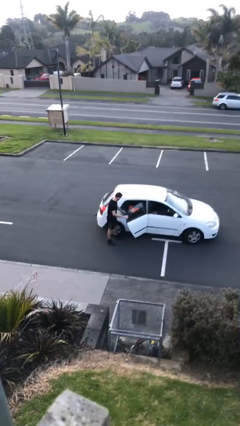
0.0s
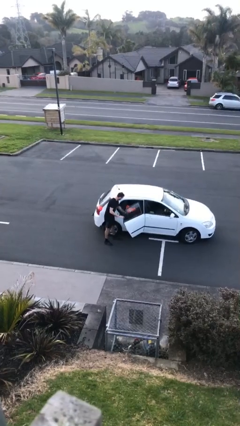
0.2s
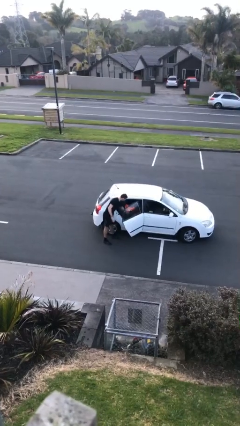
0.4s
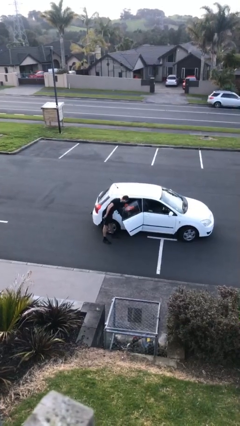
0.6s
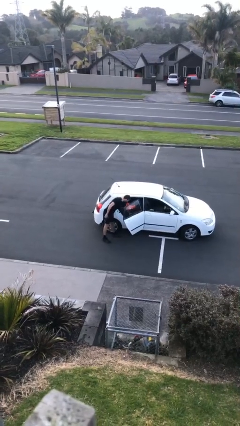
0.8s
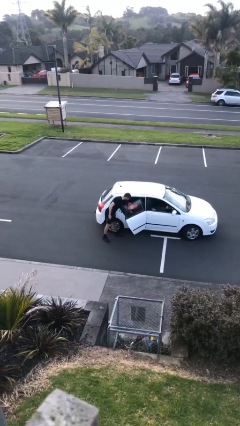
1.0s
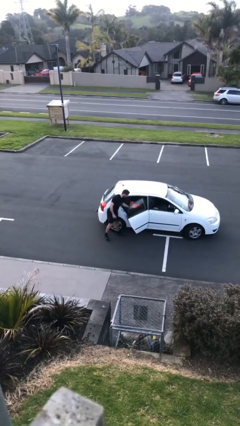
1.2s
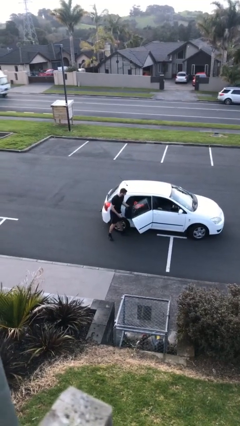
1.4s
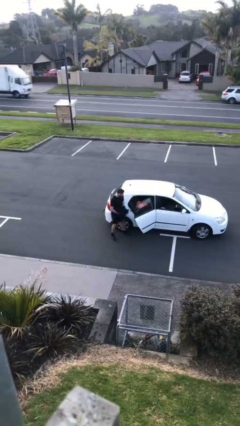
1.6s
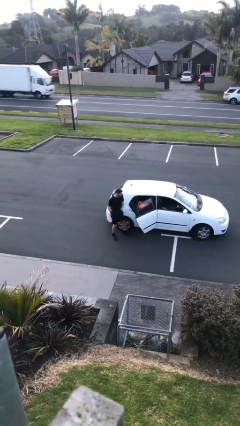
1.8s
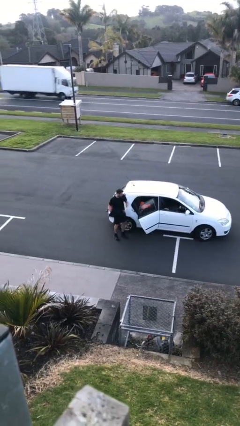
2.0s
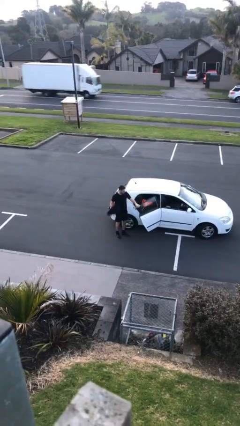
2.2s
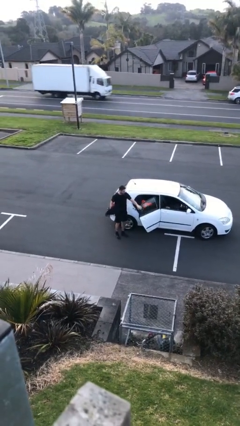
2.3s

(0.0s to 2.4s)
person unloads car

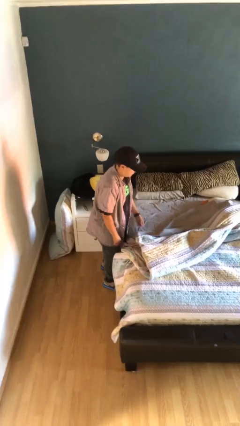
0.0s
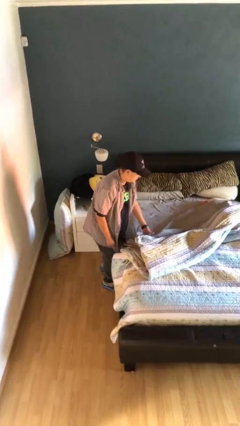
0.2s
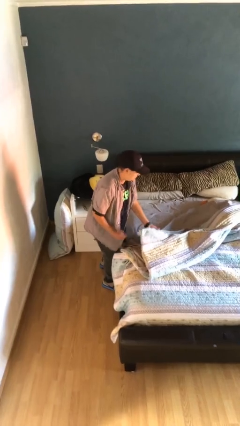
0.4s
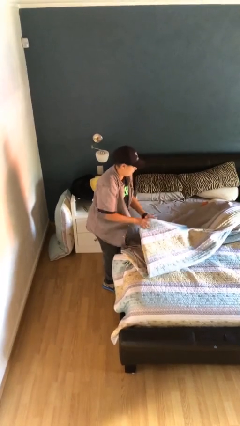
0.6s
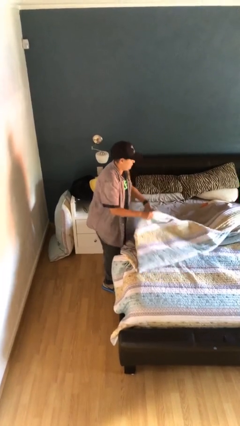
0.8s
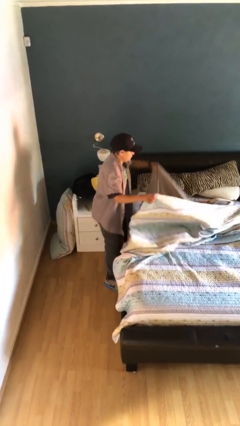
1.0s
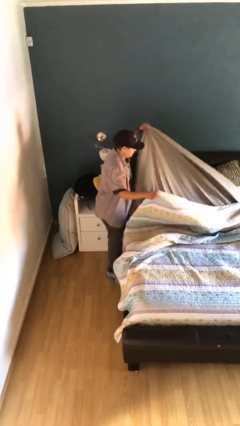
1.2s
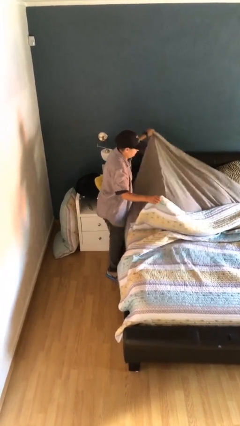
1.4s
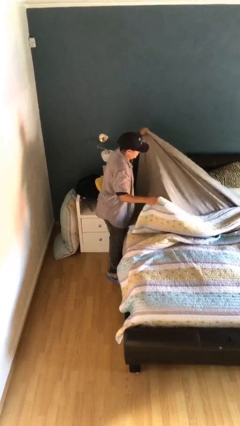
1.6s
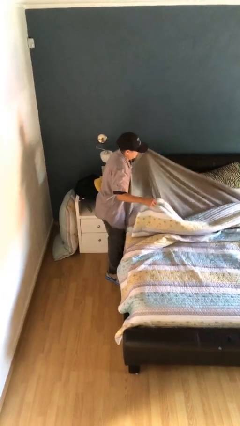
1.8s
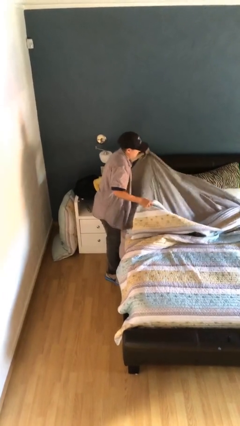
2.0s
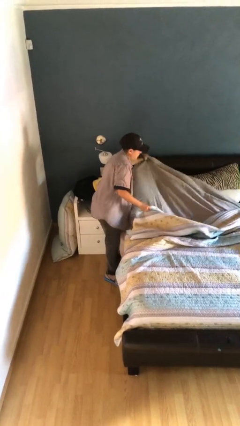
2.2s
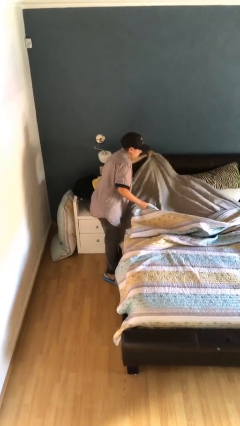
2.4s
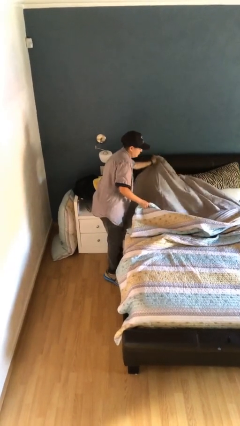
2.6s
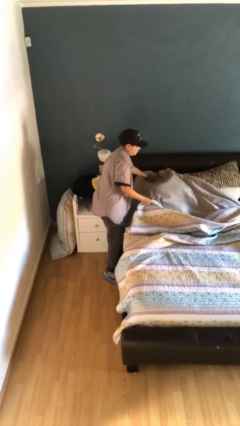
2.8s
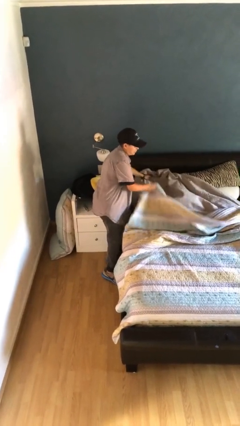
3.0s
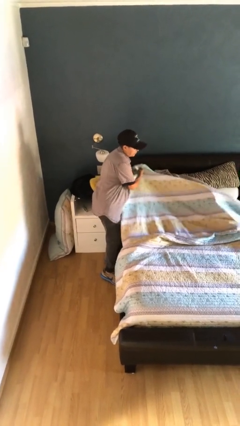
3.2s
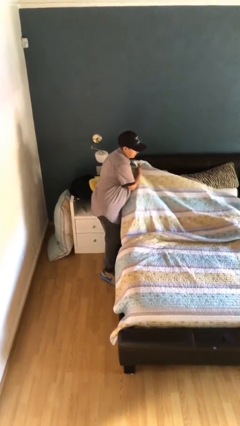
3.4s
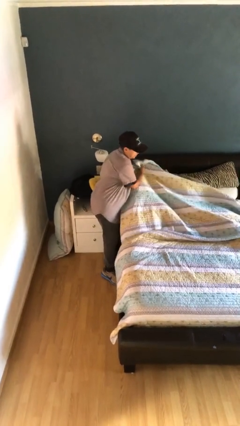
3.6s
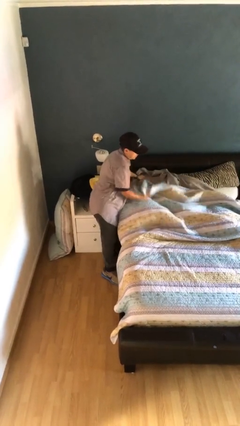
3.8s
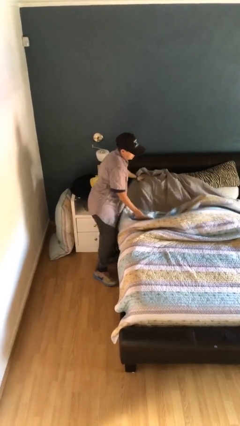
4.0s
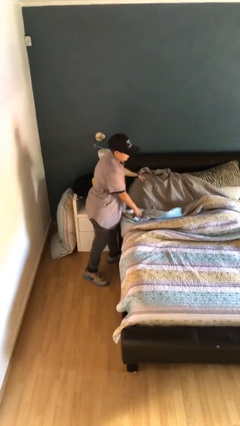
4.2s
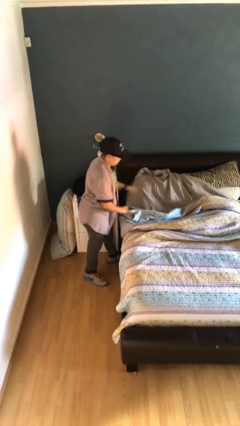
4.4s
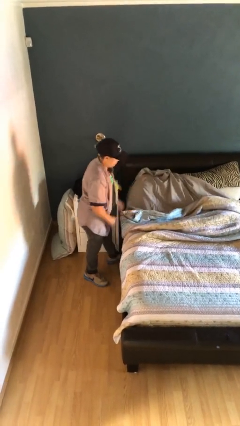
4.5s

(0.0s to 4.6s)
person makes bed

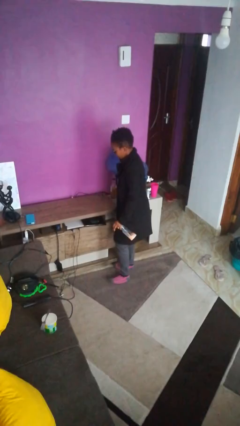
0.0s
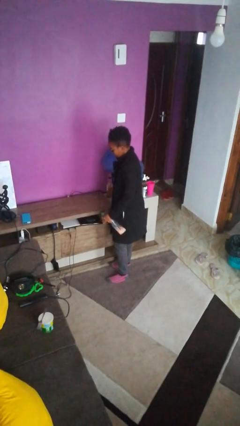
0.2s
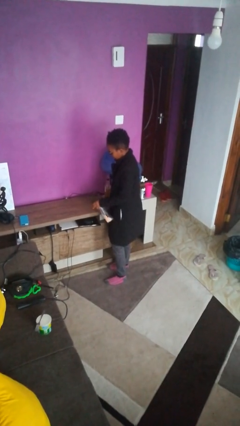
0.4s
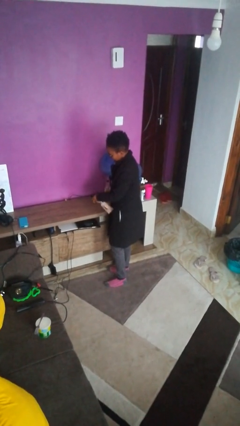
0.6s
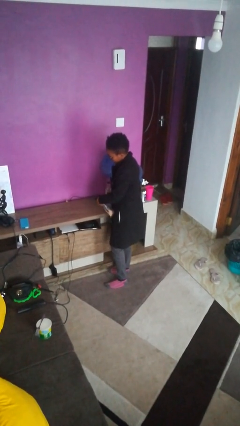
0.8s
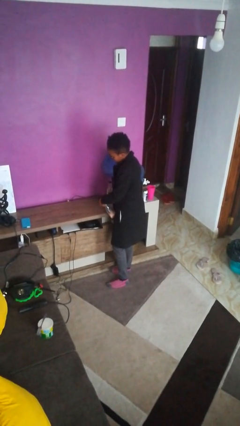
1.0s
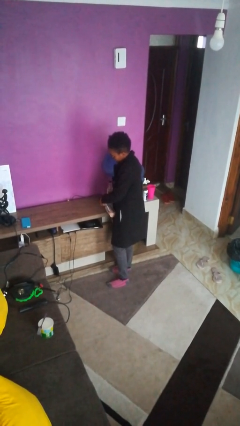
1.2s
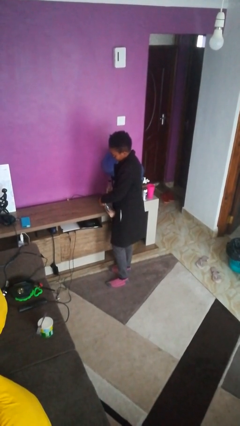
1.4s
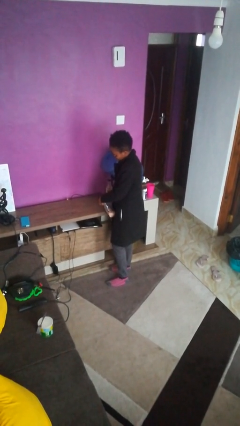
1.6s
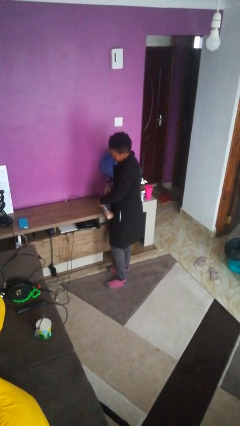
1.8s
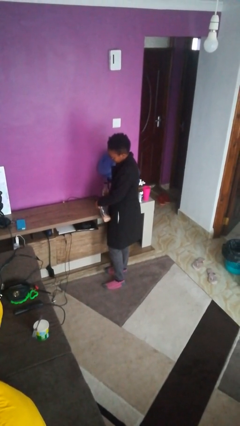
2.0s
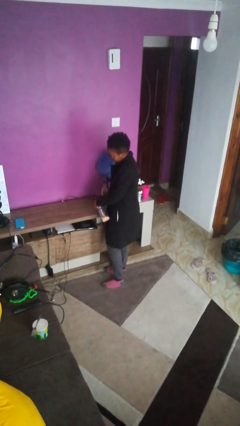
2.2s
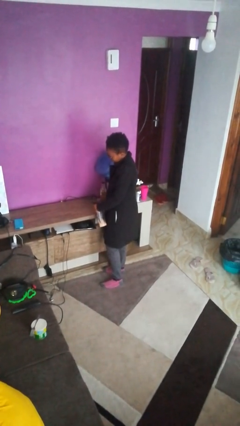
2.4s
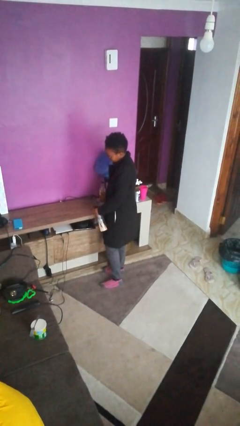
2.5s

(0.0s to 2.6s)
person sprays from bottle

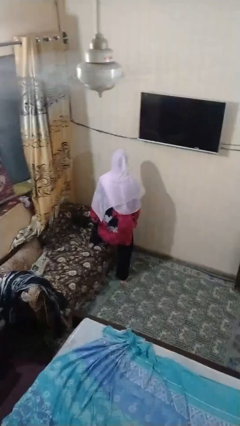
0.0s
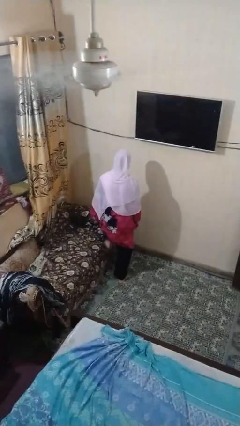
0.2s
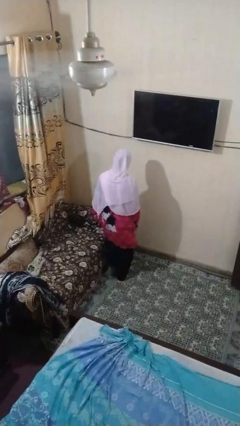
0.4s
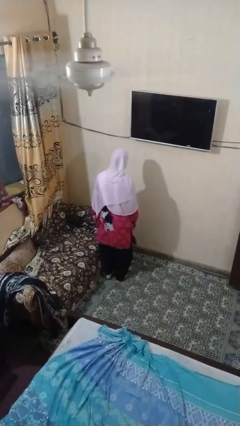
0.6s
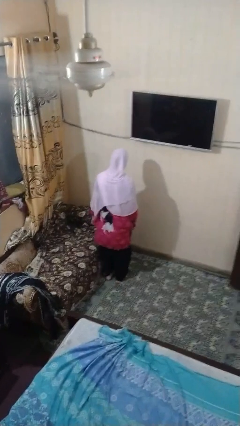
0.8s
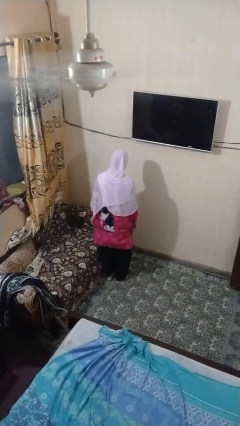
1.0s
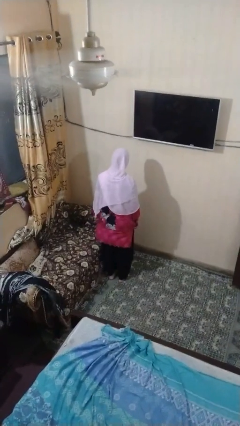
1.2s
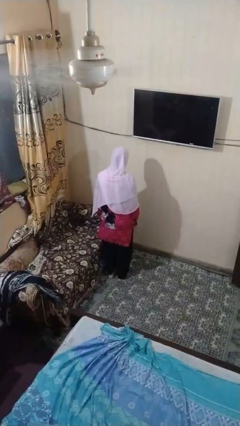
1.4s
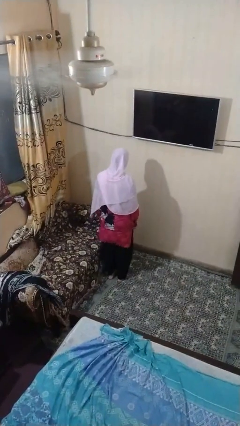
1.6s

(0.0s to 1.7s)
person climbs off couch

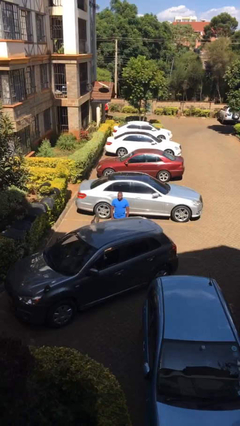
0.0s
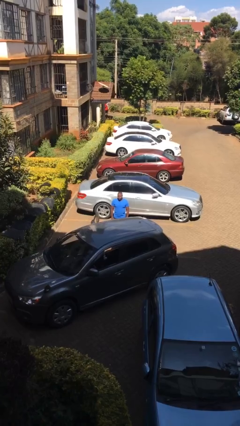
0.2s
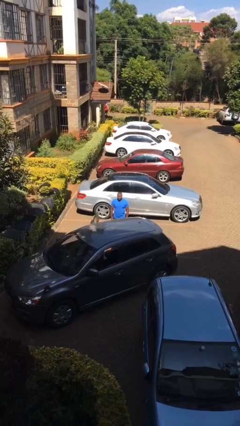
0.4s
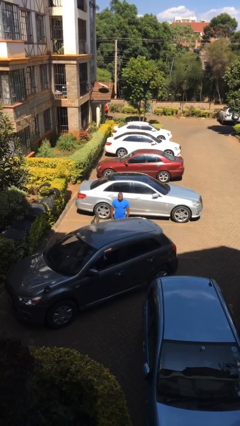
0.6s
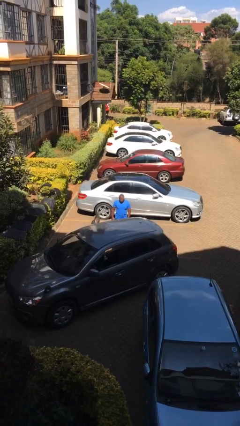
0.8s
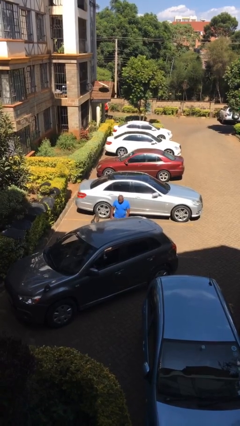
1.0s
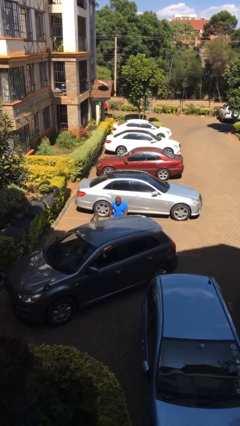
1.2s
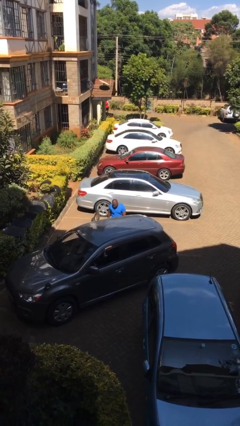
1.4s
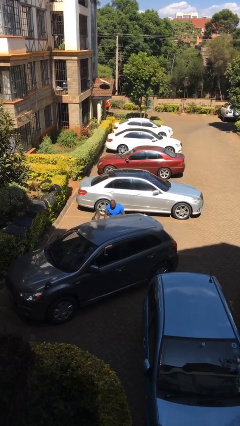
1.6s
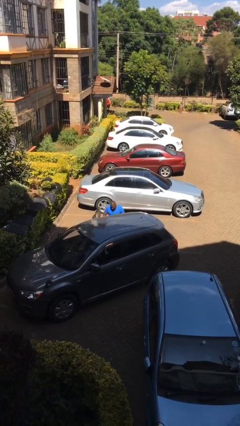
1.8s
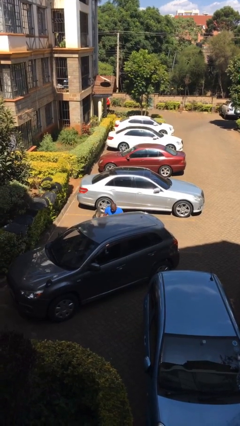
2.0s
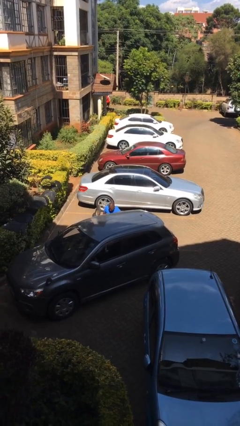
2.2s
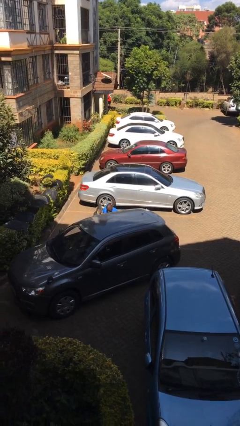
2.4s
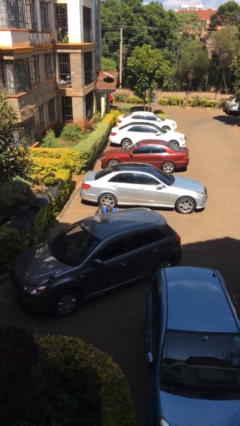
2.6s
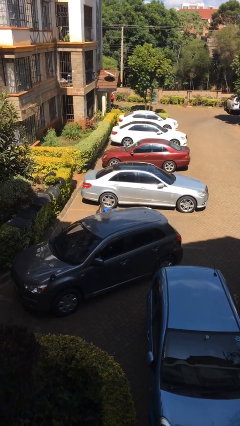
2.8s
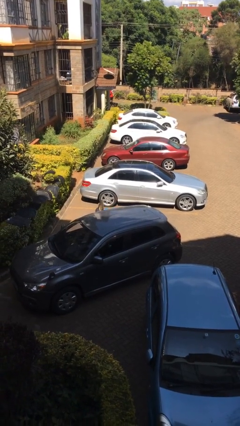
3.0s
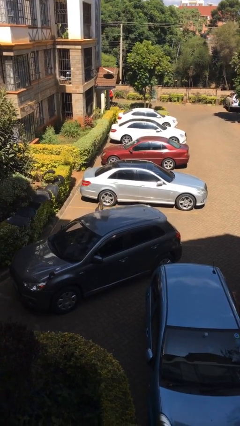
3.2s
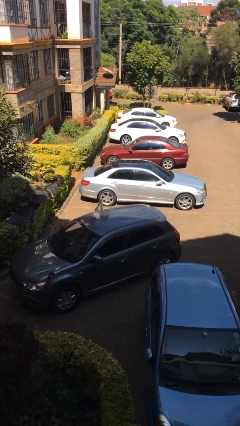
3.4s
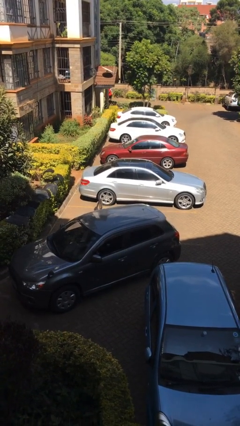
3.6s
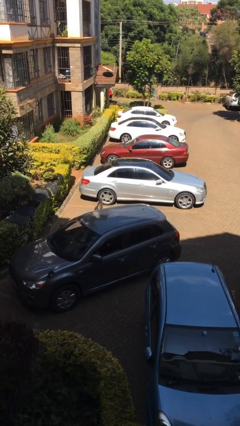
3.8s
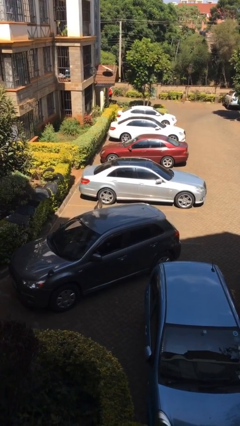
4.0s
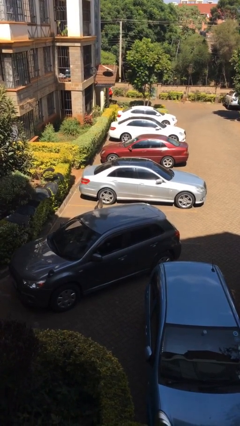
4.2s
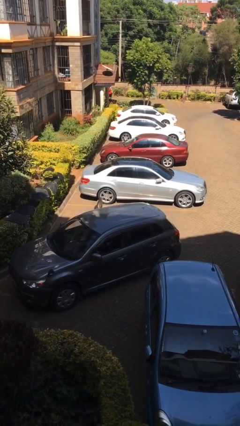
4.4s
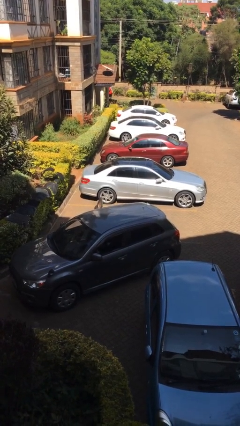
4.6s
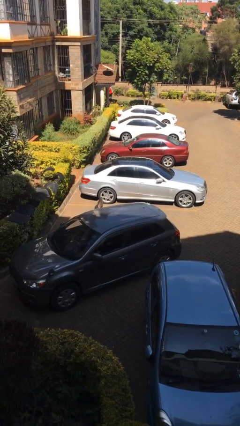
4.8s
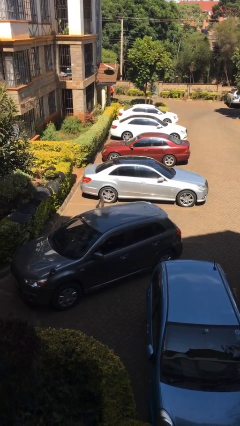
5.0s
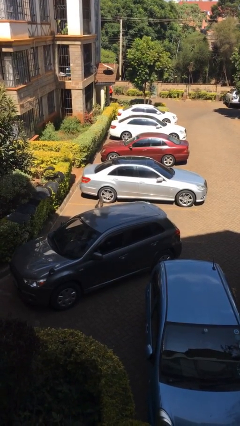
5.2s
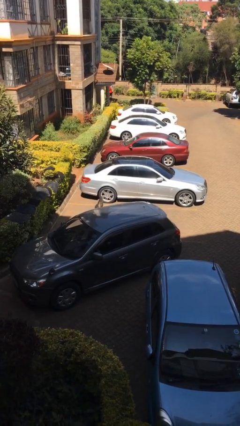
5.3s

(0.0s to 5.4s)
person enters car

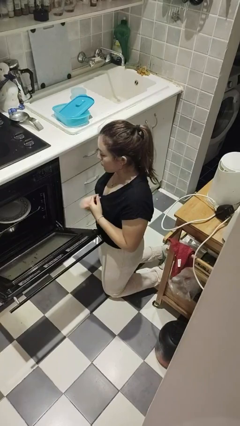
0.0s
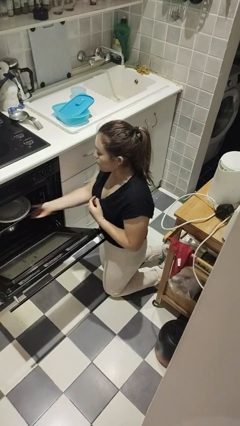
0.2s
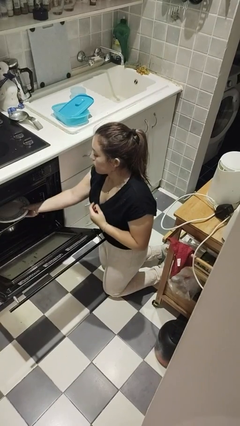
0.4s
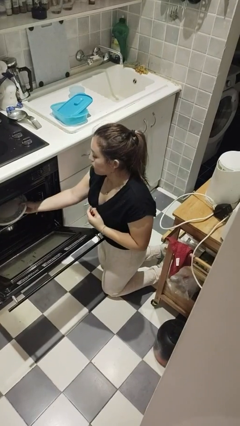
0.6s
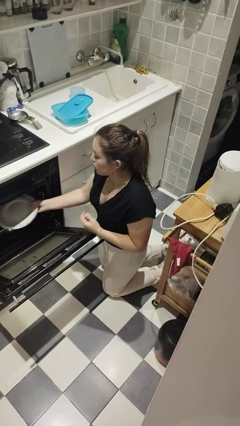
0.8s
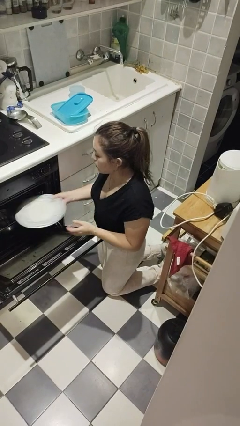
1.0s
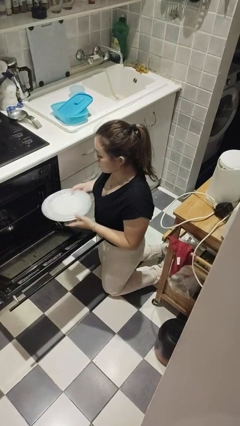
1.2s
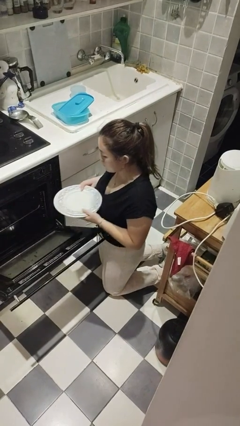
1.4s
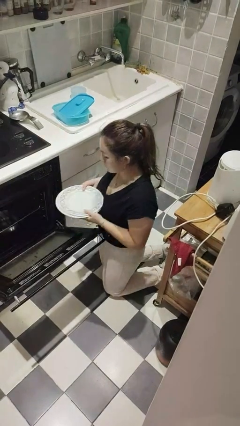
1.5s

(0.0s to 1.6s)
person unloads dishwasher
